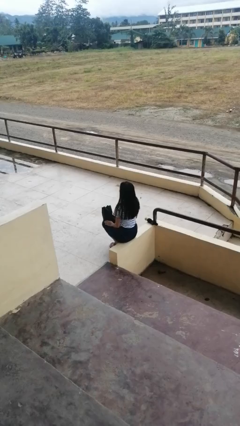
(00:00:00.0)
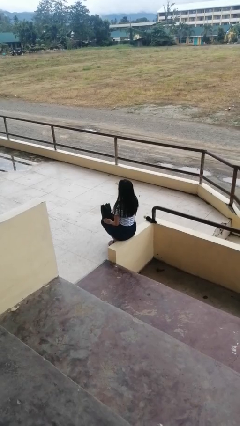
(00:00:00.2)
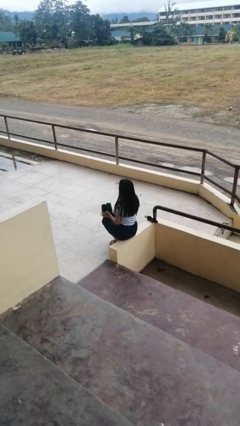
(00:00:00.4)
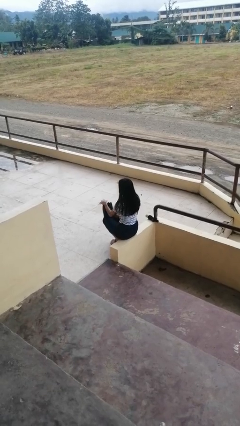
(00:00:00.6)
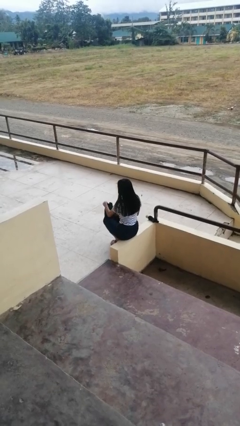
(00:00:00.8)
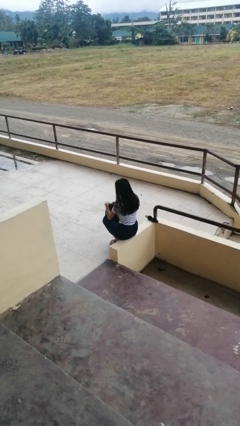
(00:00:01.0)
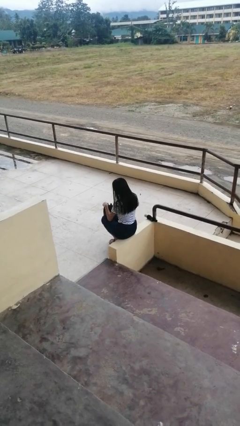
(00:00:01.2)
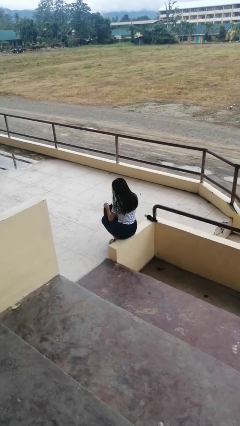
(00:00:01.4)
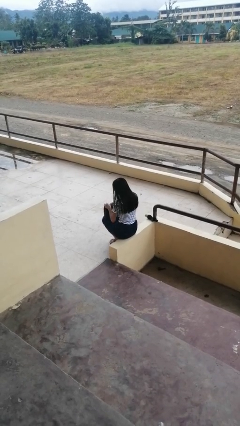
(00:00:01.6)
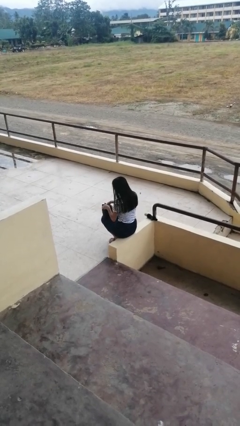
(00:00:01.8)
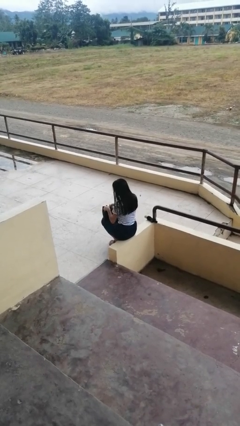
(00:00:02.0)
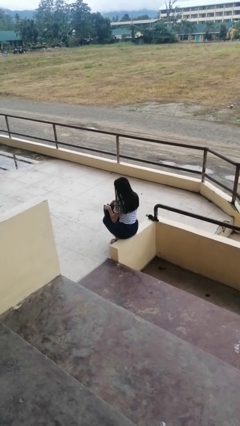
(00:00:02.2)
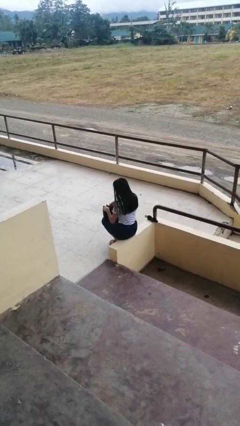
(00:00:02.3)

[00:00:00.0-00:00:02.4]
person searches in bag

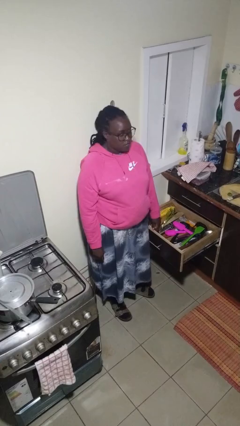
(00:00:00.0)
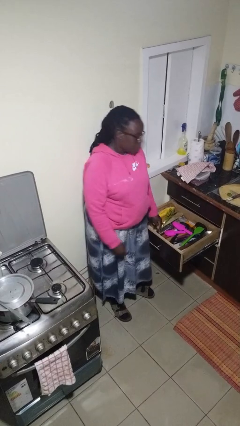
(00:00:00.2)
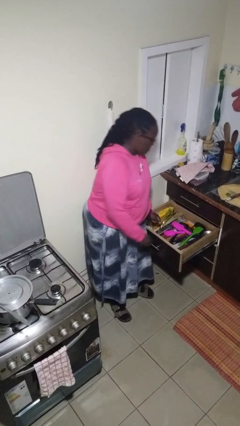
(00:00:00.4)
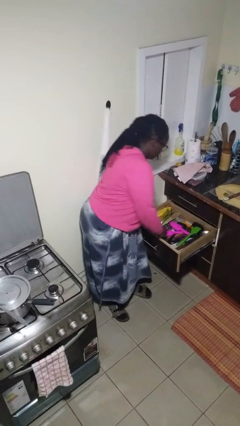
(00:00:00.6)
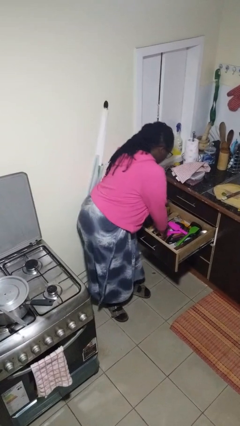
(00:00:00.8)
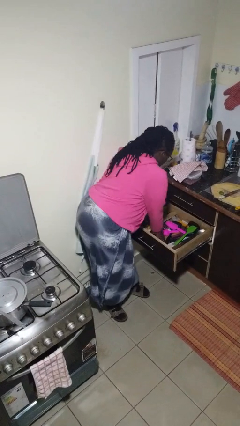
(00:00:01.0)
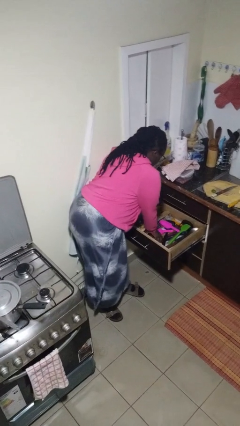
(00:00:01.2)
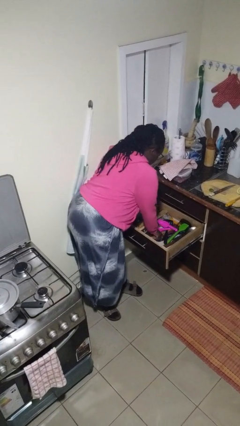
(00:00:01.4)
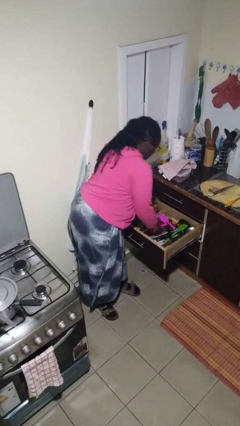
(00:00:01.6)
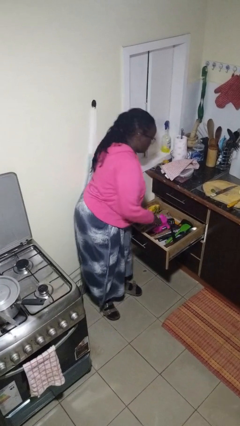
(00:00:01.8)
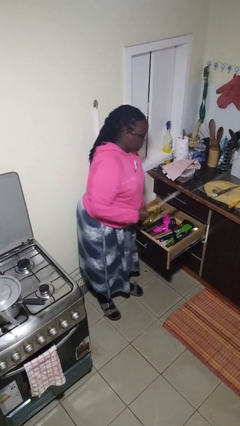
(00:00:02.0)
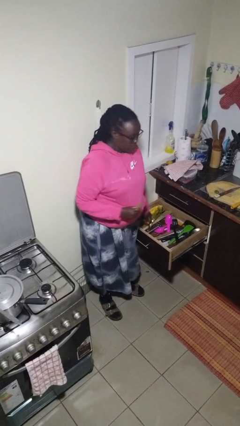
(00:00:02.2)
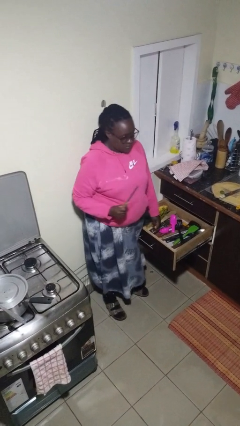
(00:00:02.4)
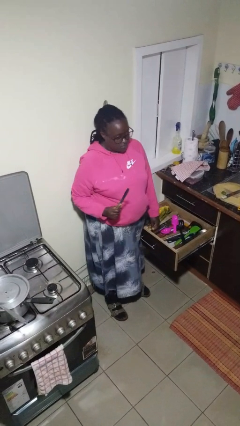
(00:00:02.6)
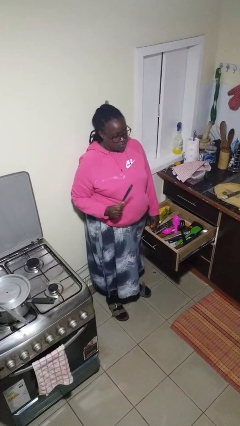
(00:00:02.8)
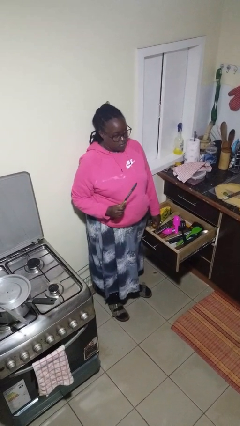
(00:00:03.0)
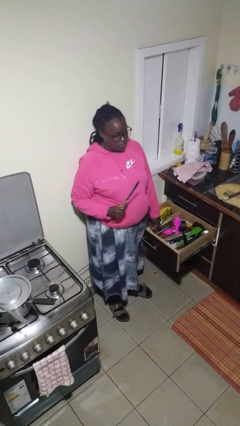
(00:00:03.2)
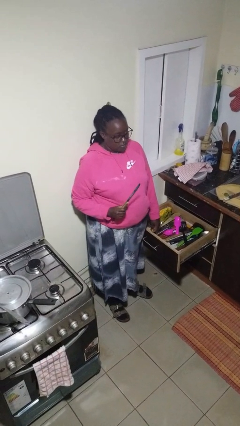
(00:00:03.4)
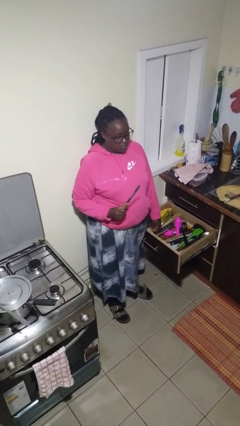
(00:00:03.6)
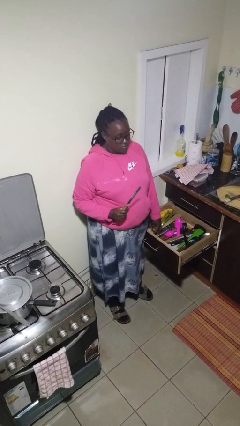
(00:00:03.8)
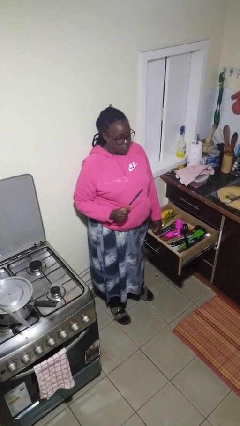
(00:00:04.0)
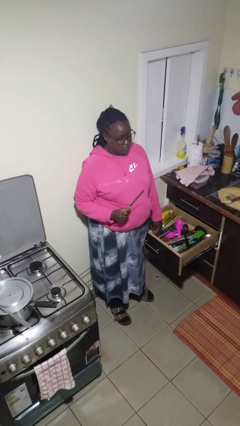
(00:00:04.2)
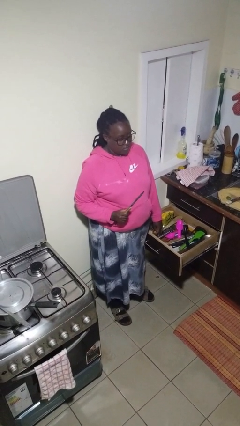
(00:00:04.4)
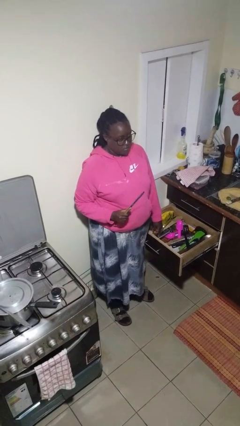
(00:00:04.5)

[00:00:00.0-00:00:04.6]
person takes object from kitchen drawer

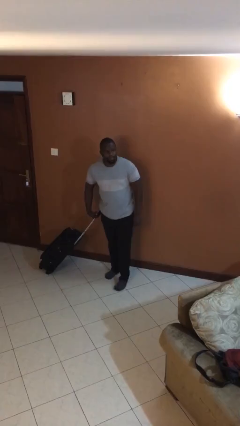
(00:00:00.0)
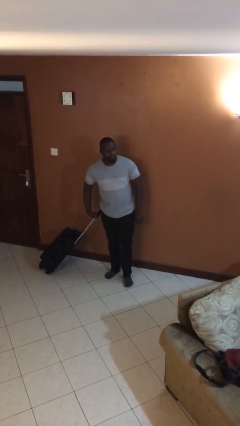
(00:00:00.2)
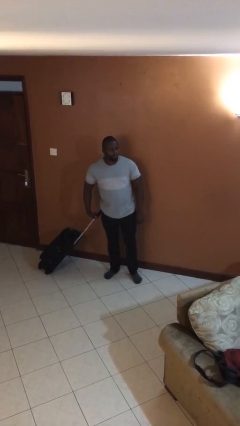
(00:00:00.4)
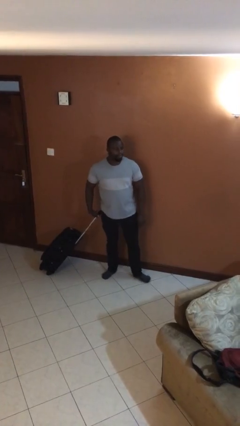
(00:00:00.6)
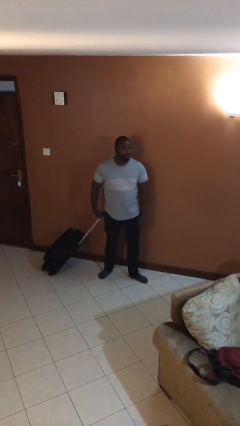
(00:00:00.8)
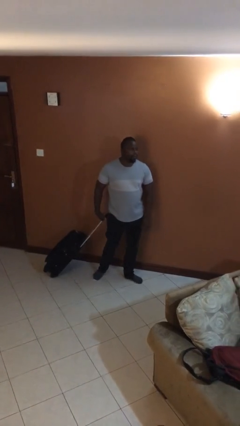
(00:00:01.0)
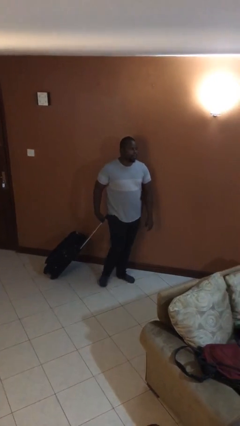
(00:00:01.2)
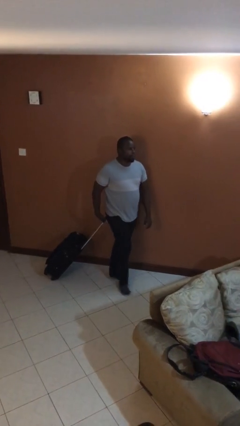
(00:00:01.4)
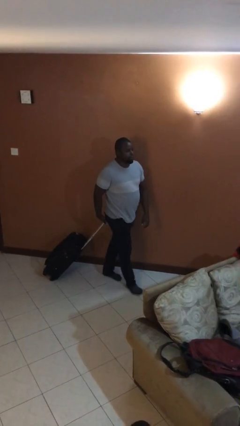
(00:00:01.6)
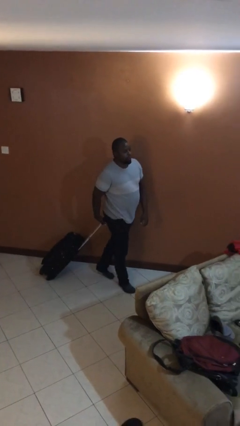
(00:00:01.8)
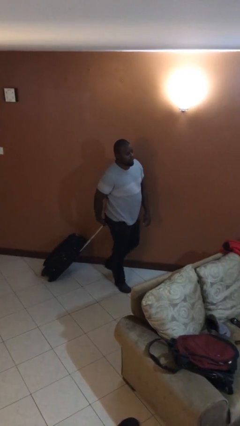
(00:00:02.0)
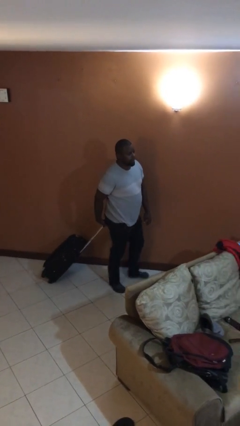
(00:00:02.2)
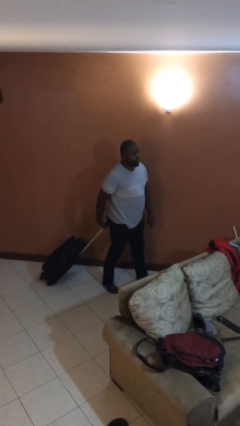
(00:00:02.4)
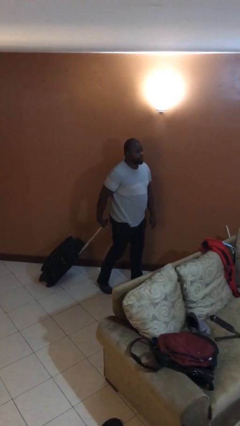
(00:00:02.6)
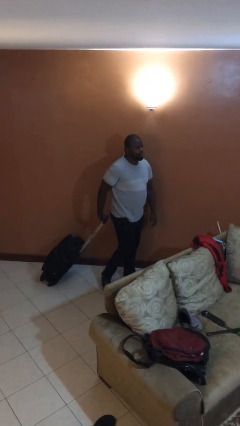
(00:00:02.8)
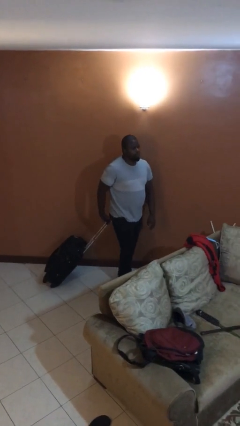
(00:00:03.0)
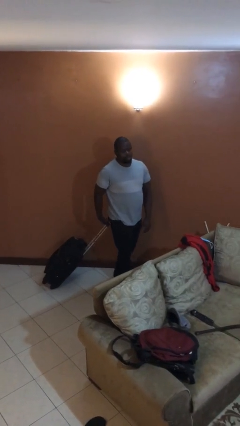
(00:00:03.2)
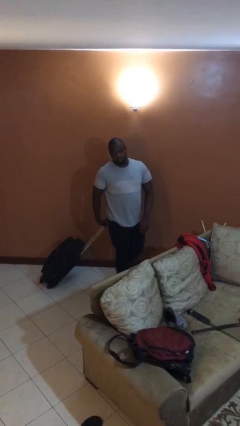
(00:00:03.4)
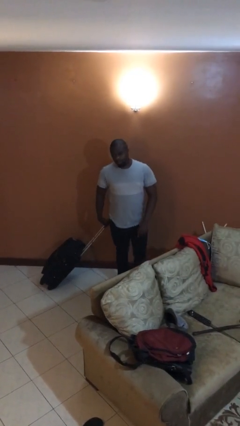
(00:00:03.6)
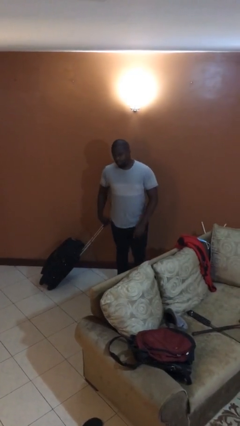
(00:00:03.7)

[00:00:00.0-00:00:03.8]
person pulls wheeled cart

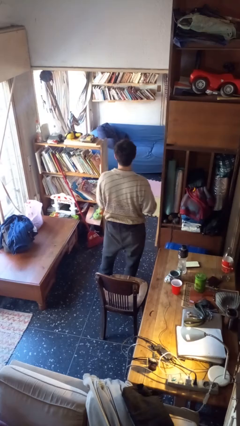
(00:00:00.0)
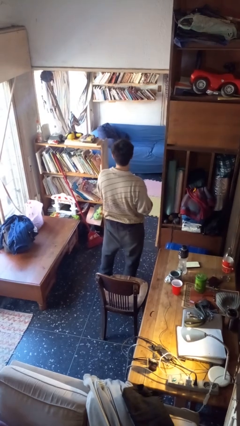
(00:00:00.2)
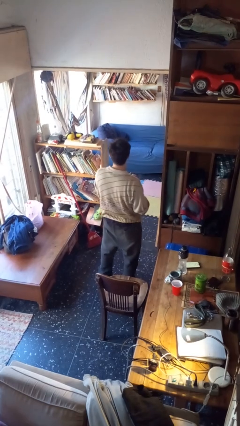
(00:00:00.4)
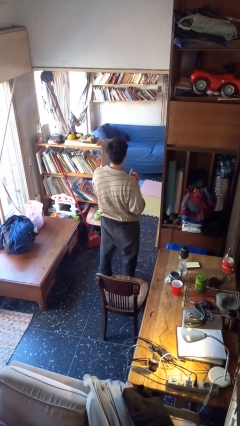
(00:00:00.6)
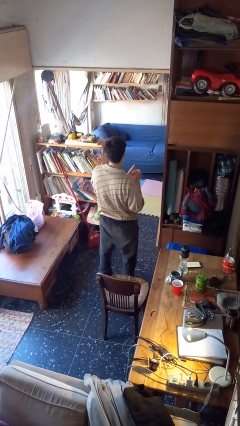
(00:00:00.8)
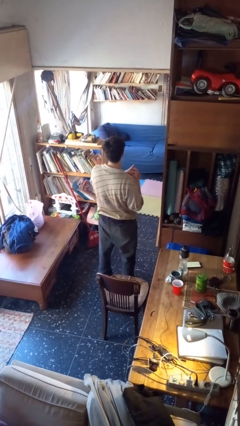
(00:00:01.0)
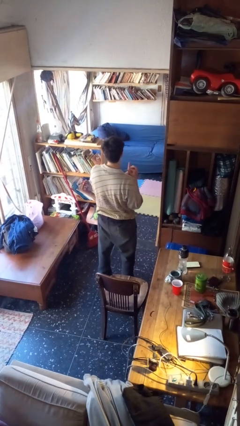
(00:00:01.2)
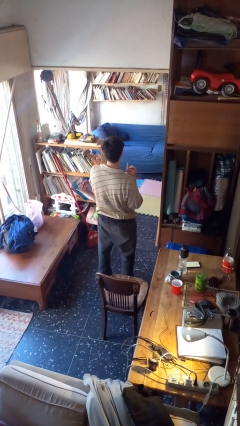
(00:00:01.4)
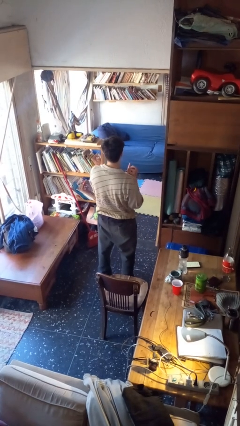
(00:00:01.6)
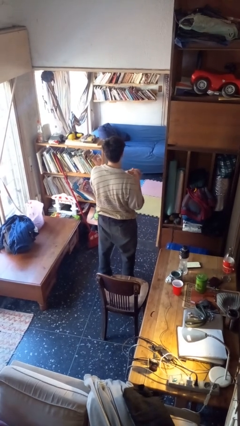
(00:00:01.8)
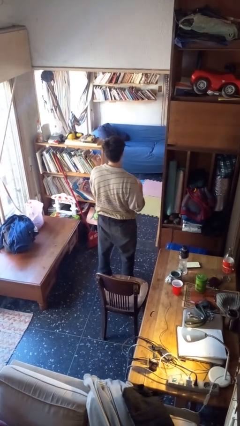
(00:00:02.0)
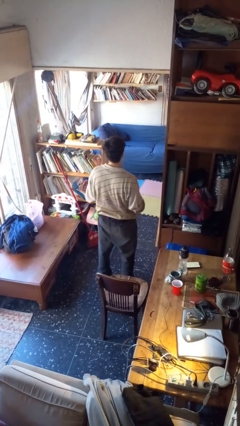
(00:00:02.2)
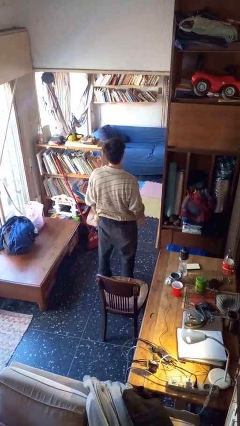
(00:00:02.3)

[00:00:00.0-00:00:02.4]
person snaps fingers

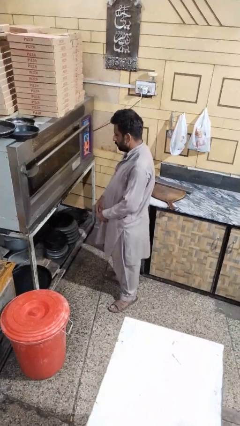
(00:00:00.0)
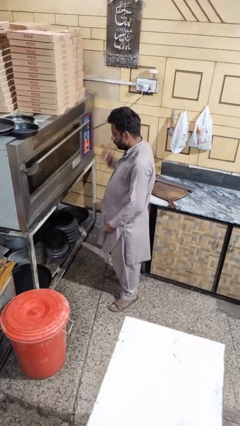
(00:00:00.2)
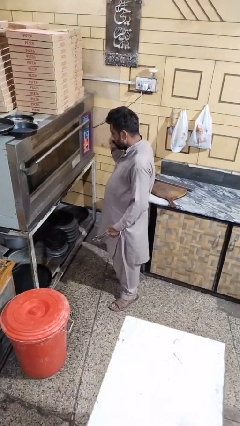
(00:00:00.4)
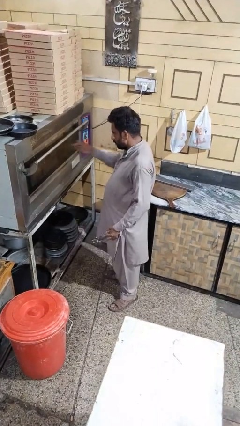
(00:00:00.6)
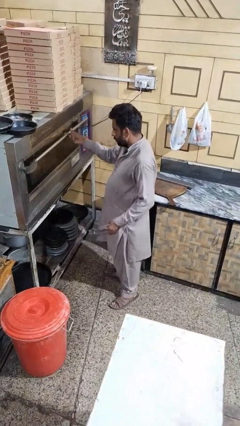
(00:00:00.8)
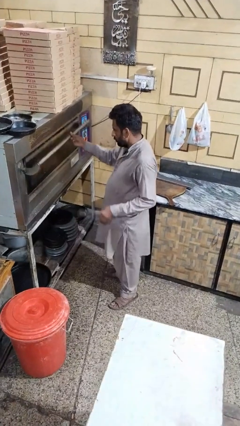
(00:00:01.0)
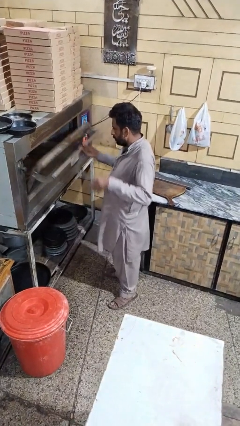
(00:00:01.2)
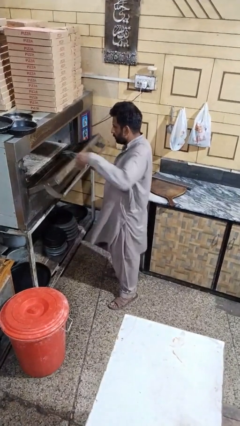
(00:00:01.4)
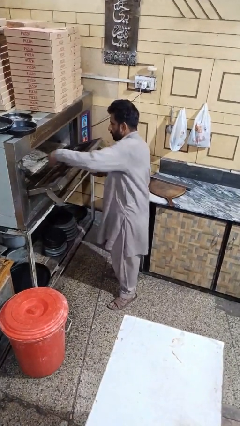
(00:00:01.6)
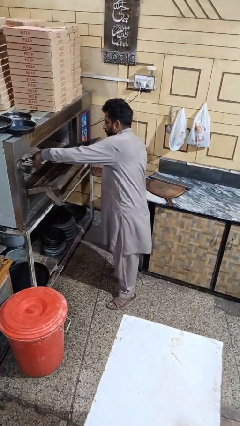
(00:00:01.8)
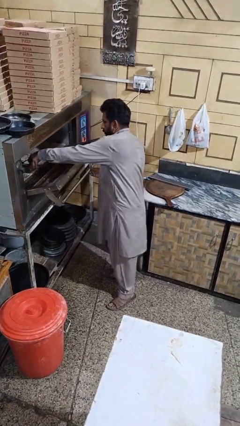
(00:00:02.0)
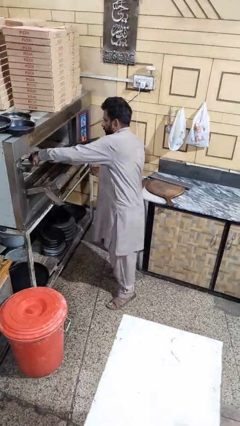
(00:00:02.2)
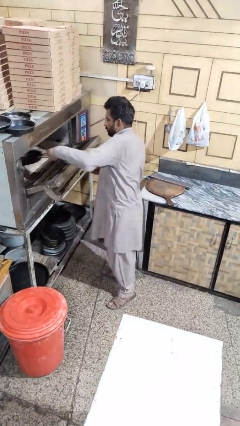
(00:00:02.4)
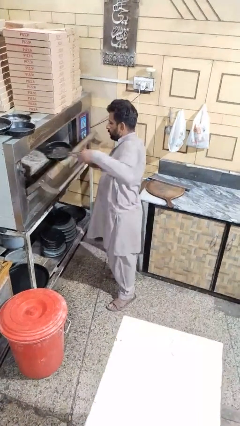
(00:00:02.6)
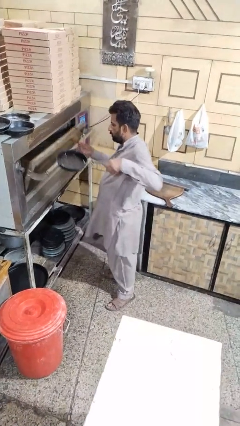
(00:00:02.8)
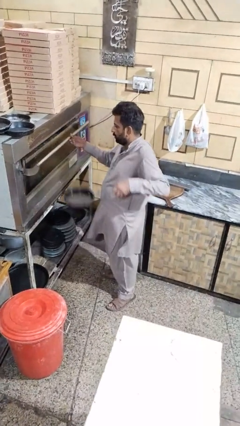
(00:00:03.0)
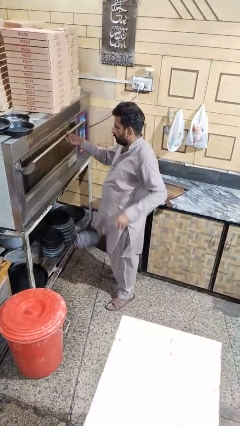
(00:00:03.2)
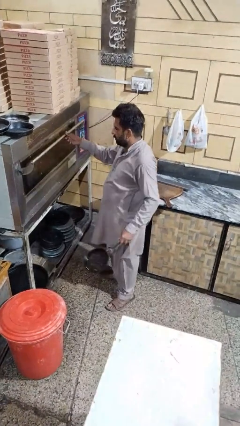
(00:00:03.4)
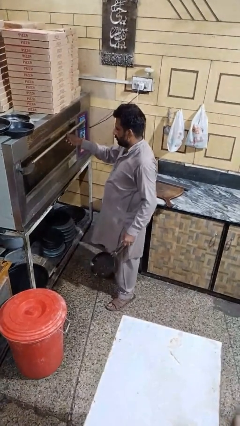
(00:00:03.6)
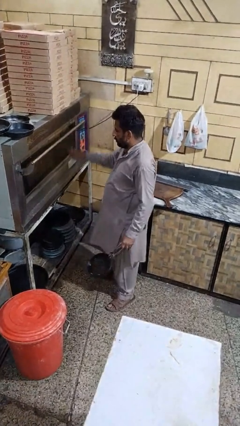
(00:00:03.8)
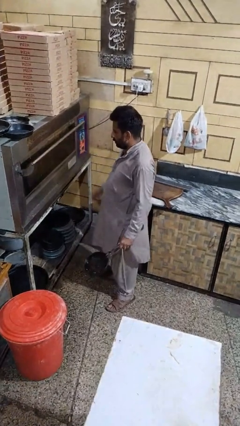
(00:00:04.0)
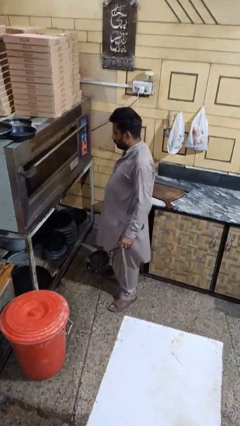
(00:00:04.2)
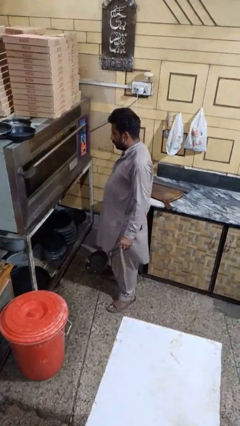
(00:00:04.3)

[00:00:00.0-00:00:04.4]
person takes object from microwave
